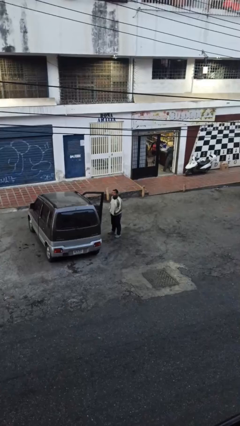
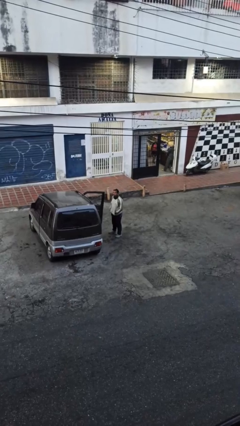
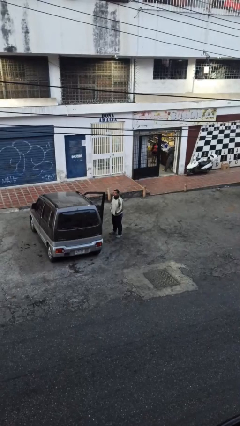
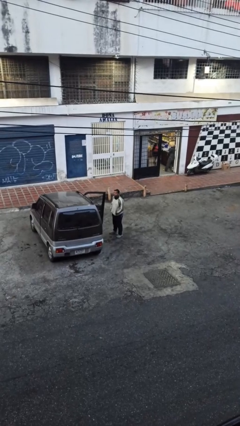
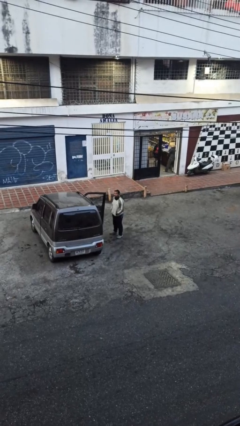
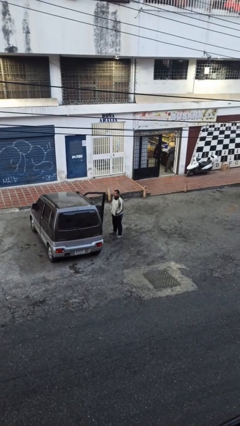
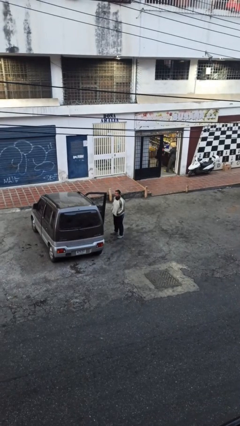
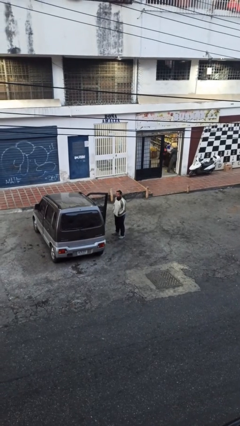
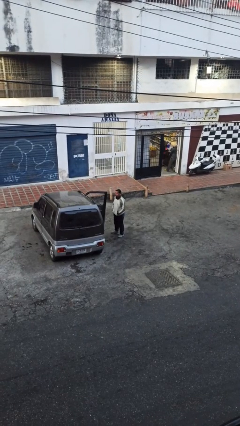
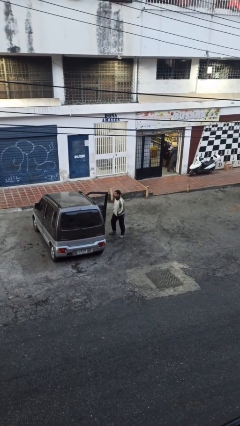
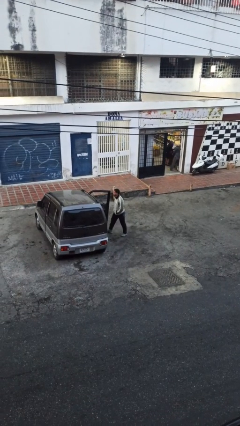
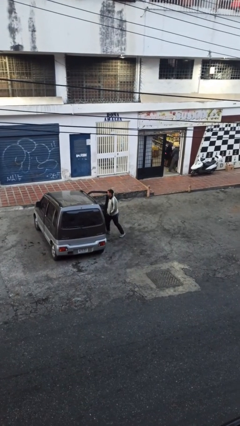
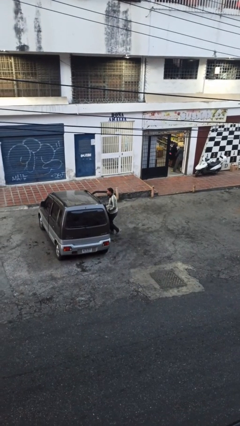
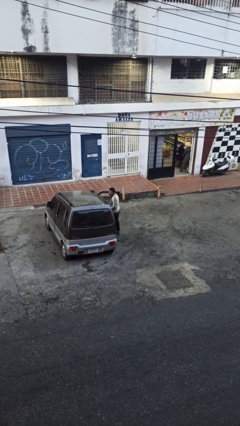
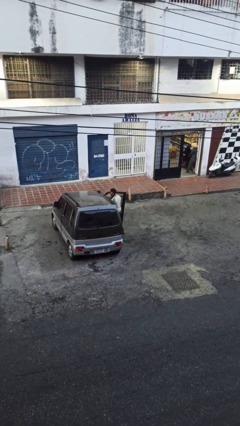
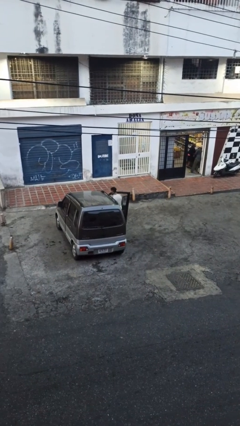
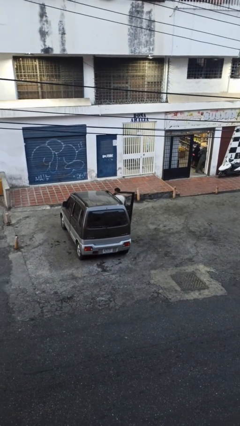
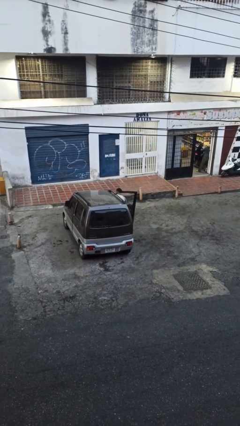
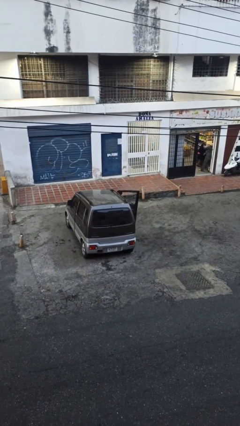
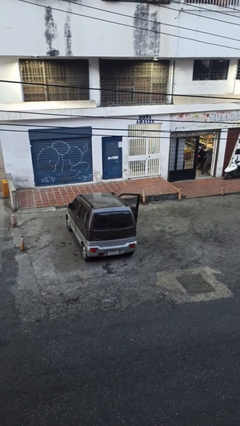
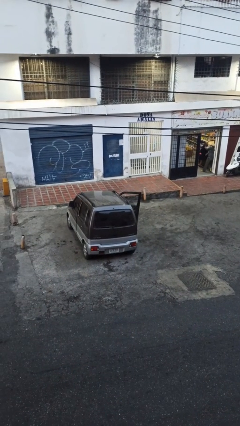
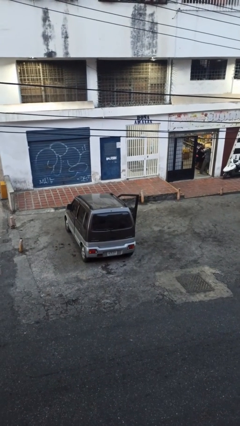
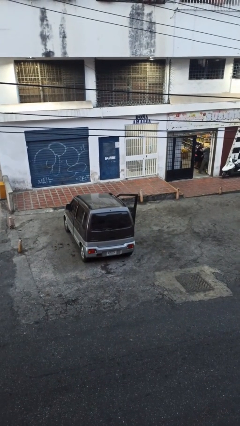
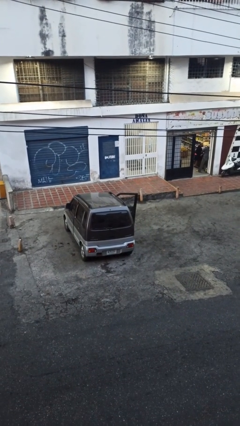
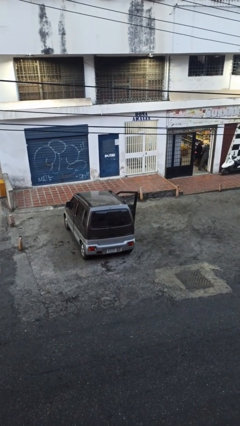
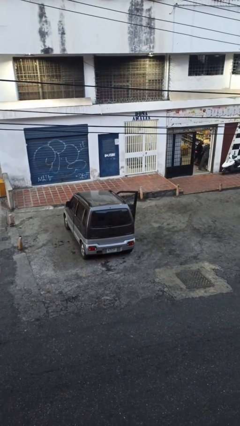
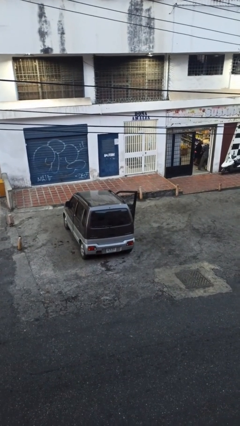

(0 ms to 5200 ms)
person enters car

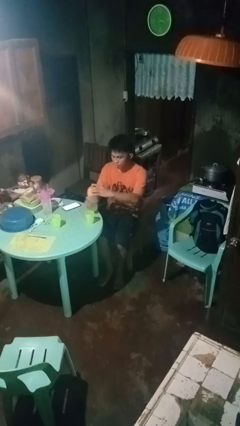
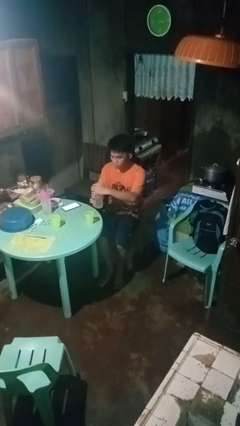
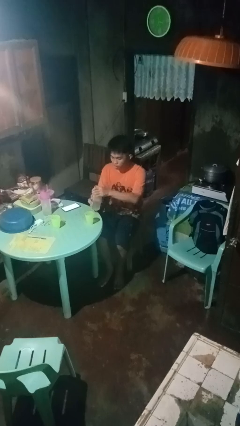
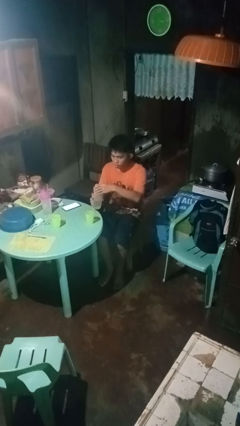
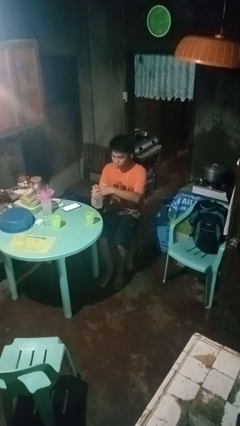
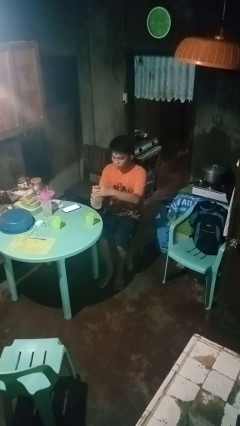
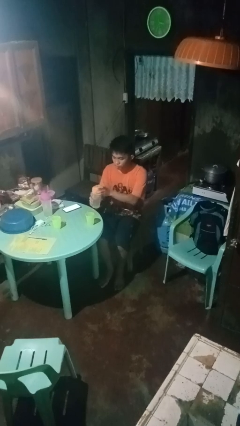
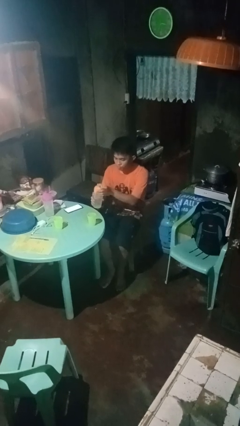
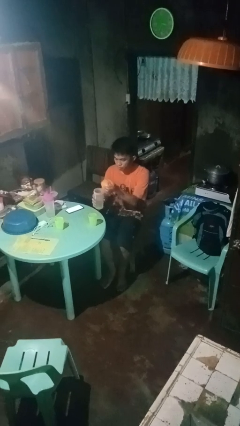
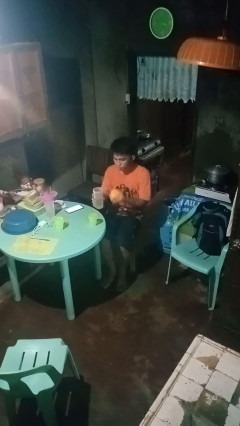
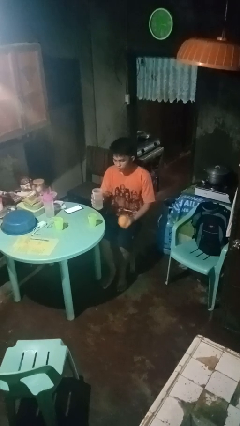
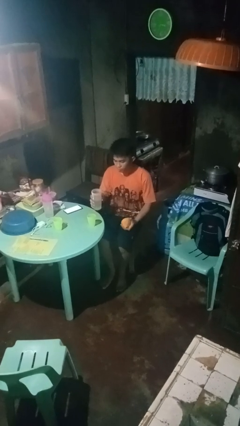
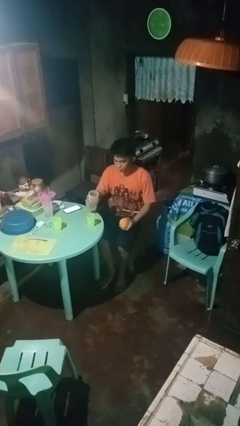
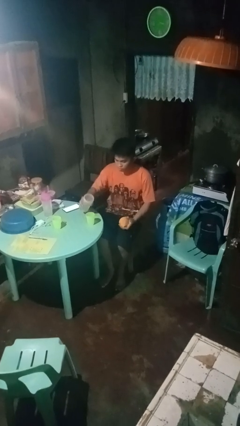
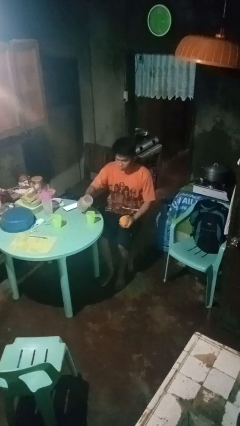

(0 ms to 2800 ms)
person unscrews lid from bottle

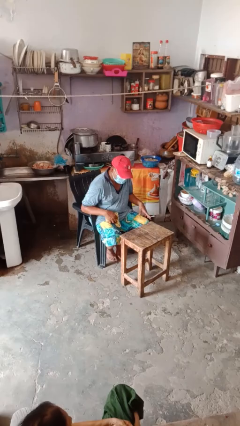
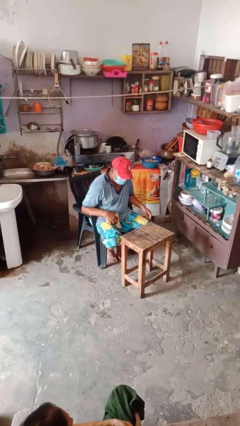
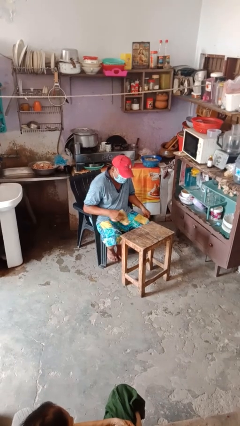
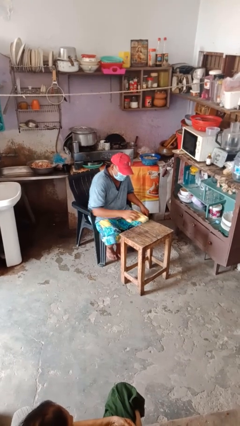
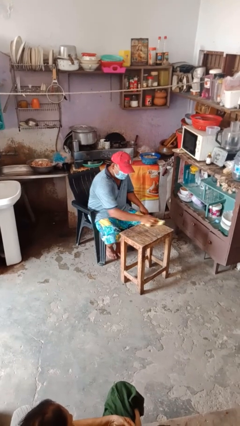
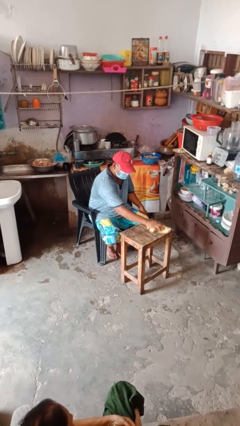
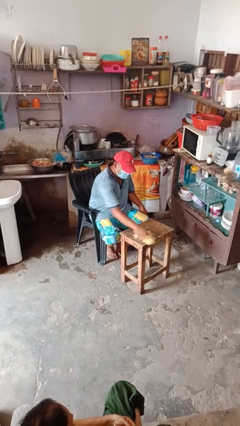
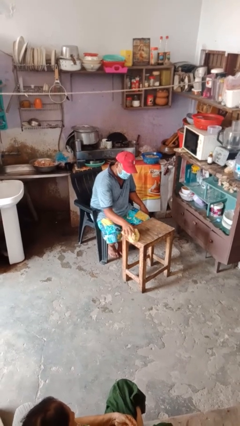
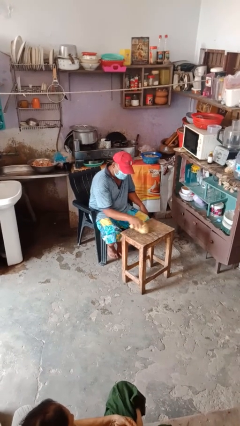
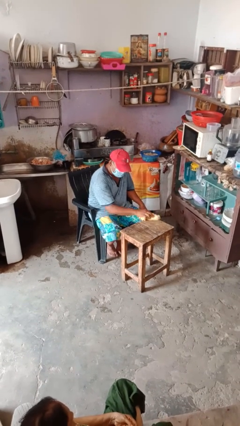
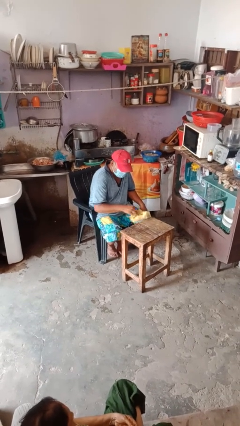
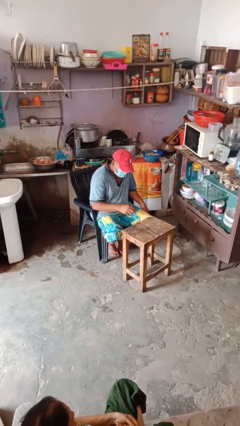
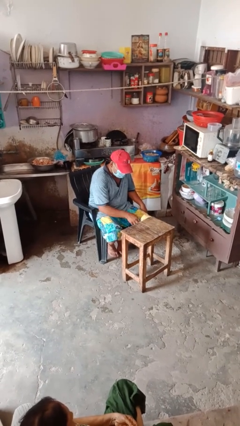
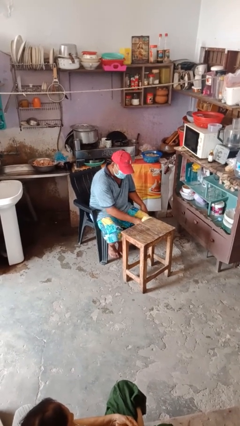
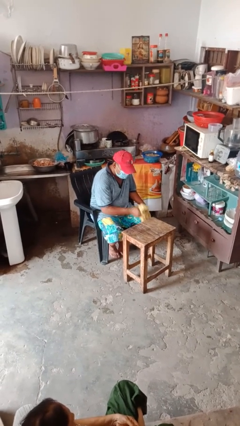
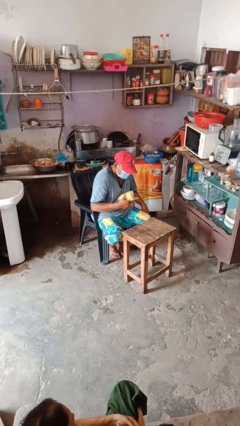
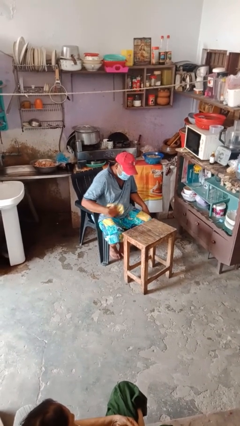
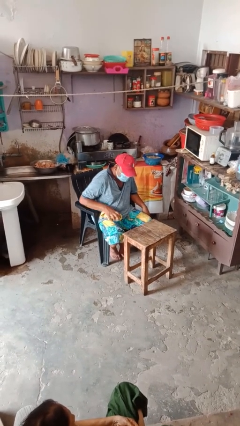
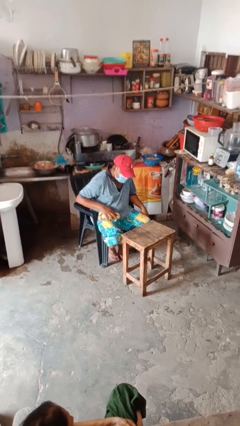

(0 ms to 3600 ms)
person cleans table with rag

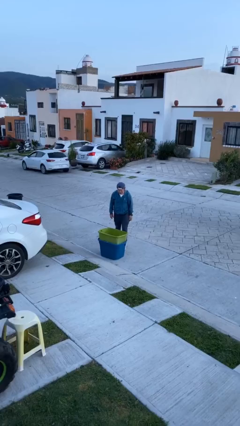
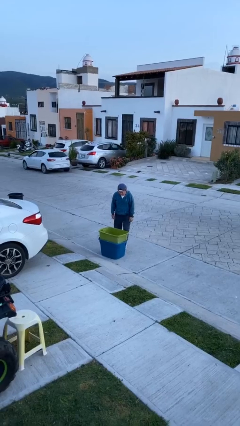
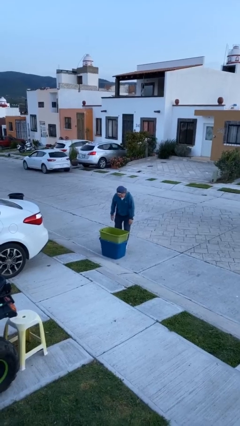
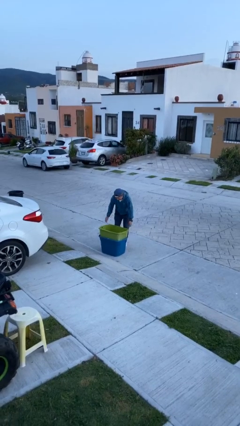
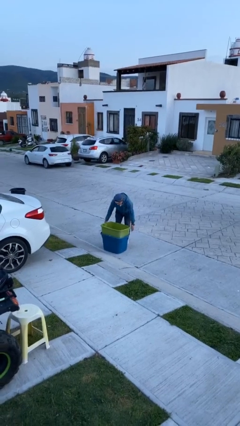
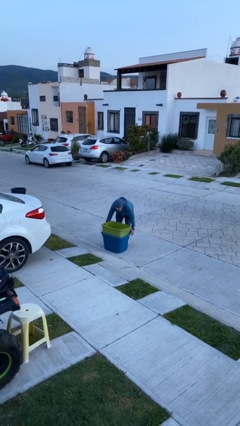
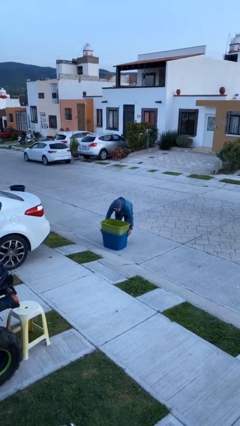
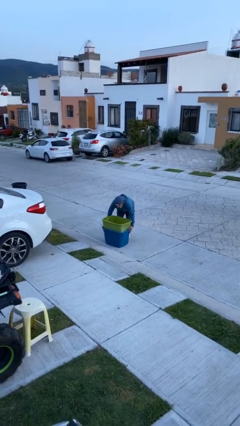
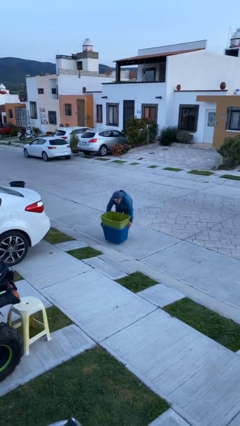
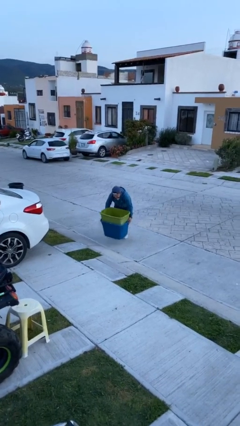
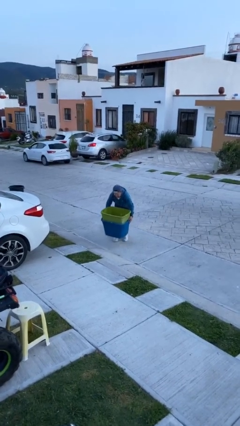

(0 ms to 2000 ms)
person picks up object from floor

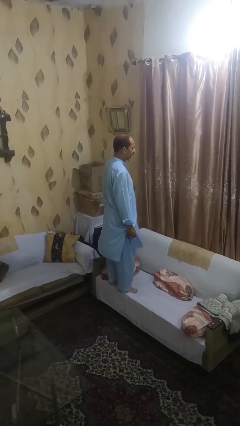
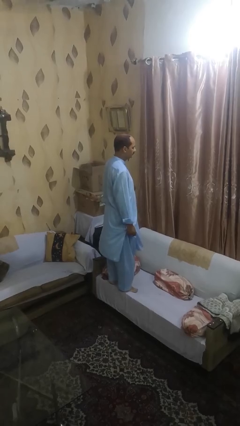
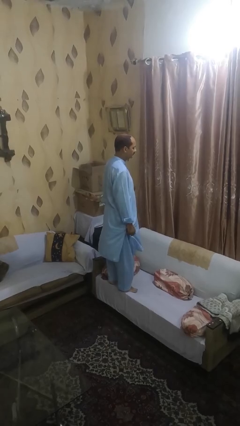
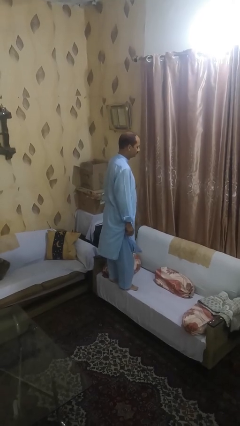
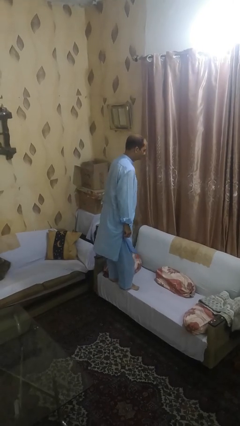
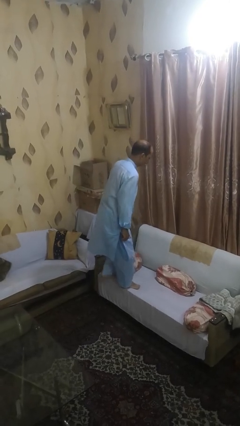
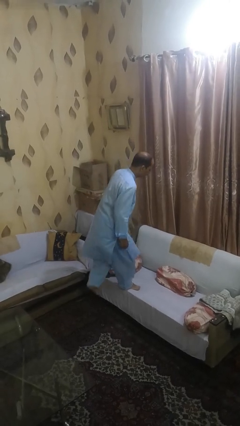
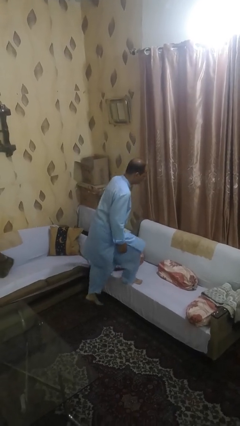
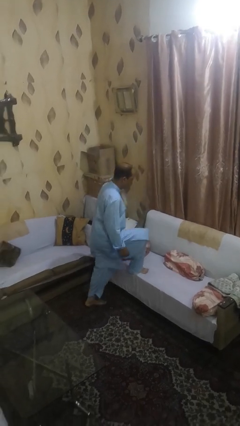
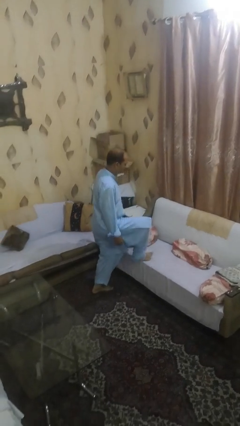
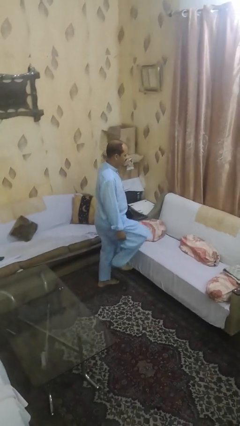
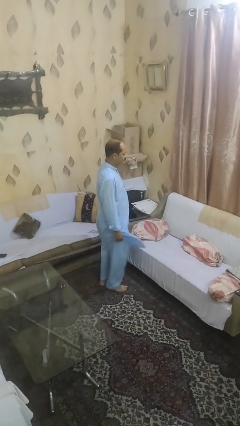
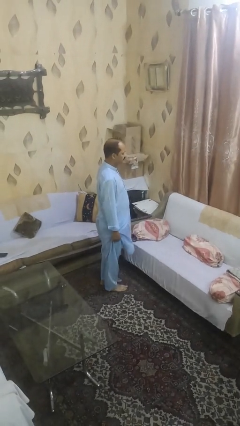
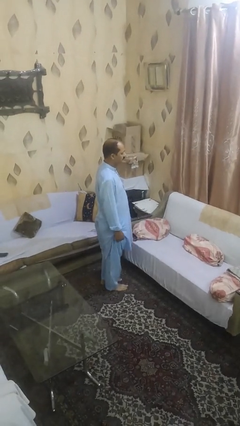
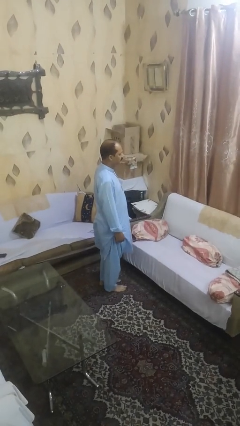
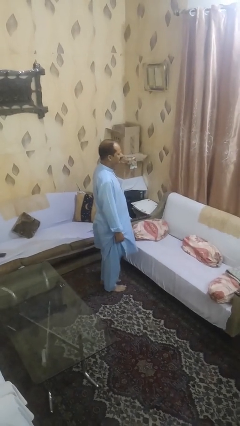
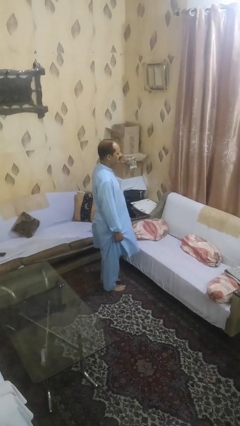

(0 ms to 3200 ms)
person climbs off chair

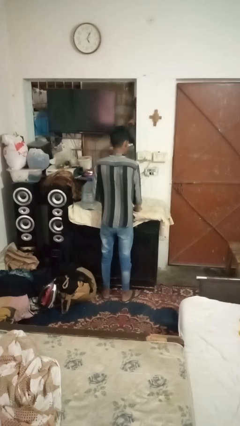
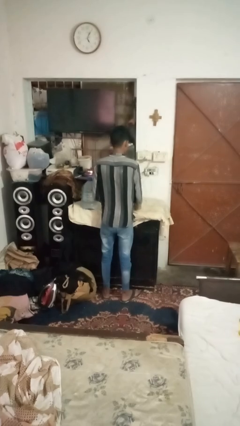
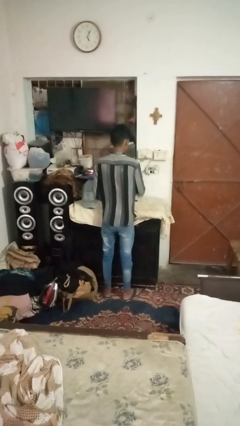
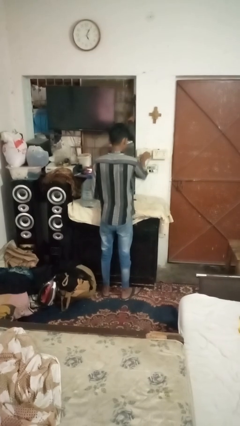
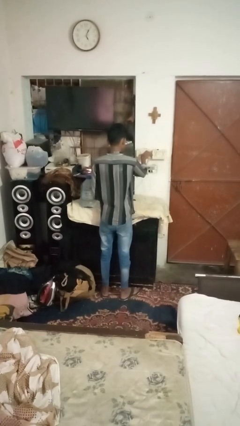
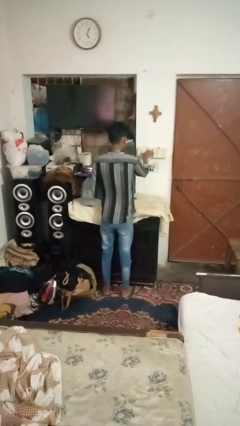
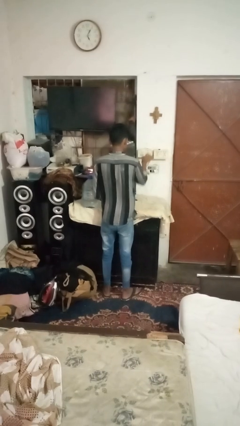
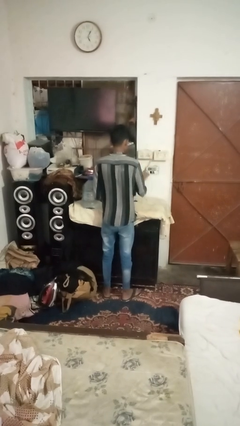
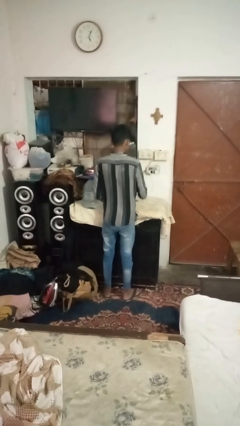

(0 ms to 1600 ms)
person unplugs from electrical socket
